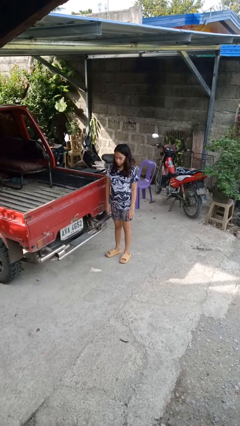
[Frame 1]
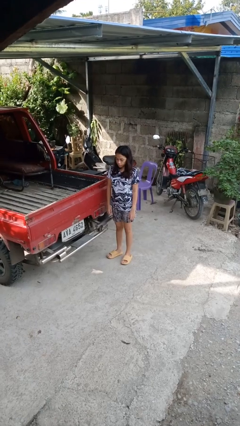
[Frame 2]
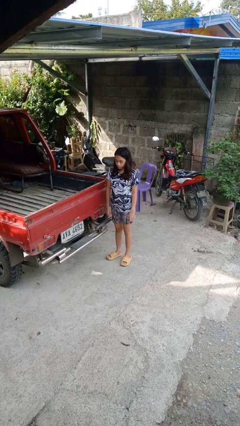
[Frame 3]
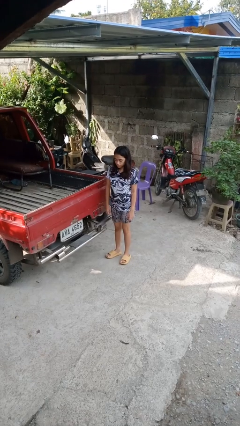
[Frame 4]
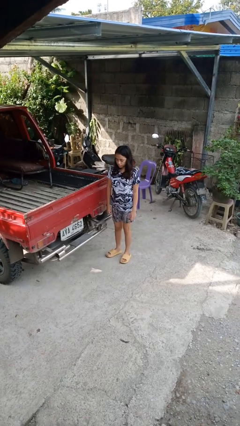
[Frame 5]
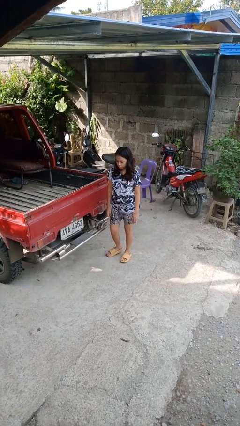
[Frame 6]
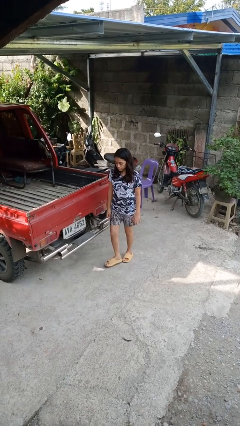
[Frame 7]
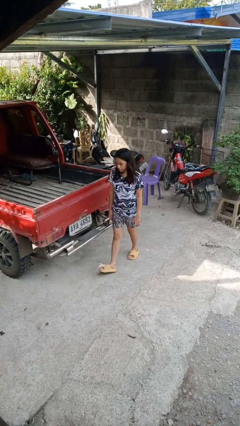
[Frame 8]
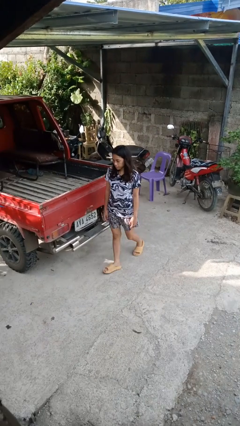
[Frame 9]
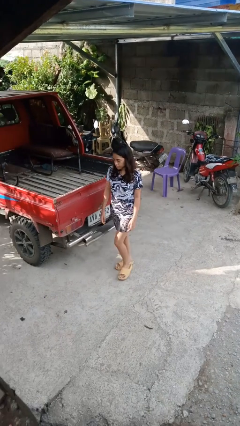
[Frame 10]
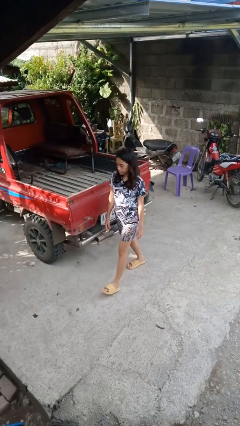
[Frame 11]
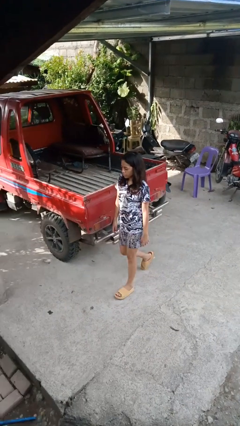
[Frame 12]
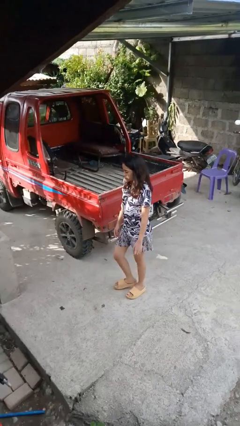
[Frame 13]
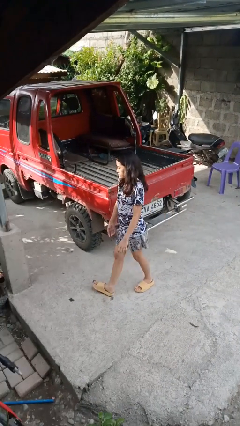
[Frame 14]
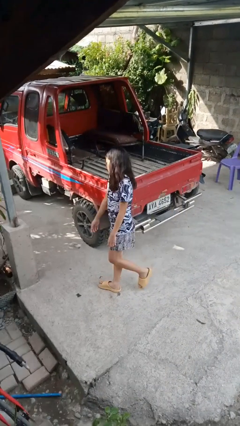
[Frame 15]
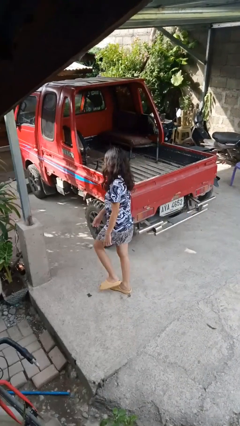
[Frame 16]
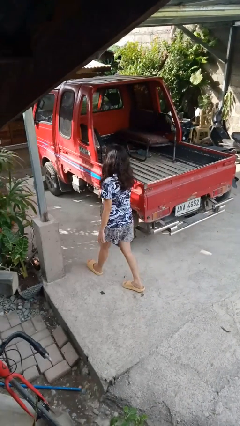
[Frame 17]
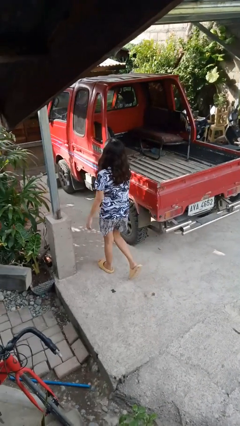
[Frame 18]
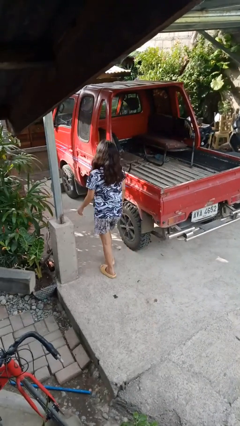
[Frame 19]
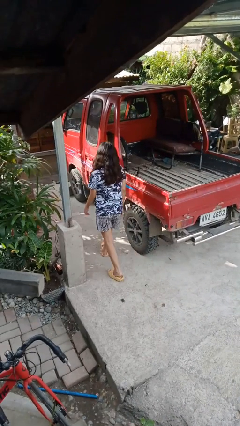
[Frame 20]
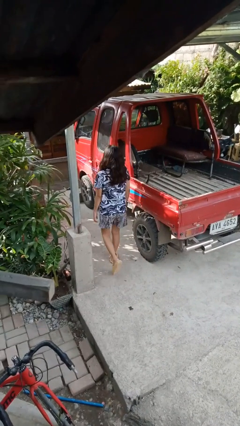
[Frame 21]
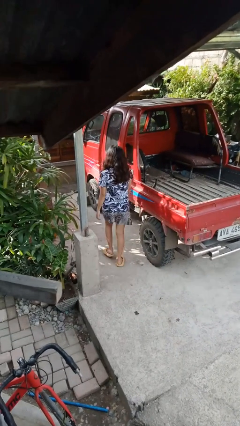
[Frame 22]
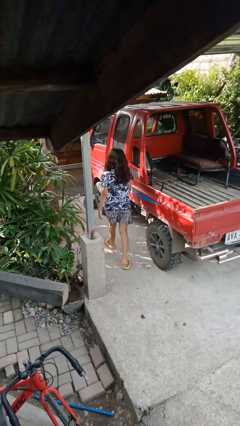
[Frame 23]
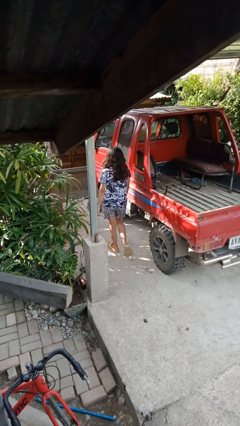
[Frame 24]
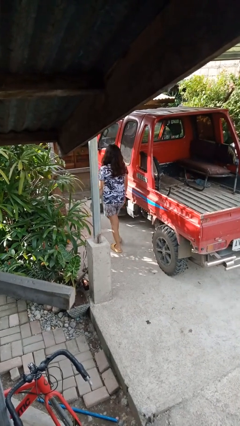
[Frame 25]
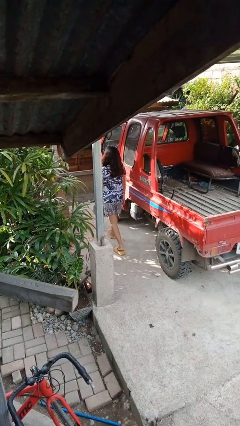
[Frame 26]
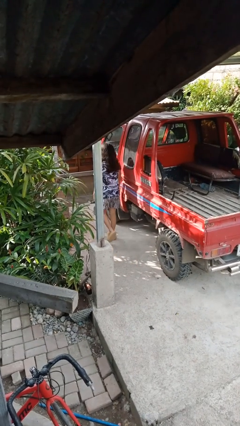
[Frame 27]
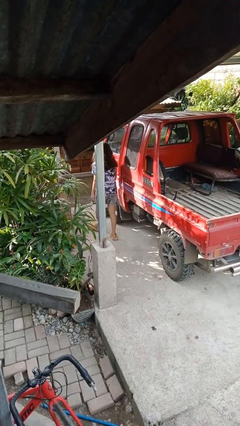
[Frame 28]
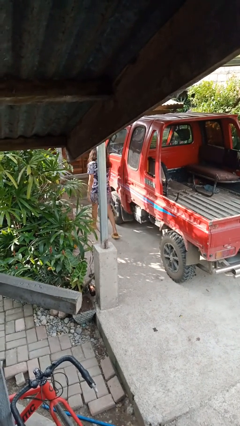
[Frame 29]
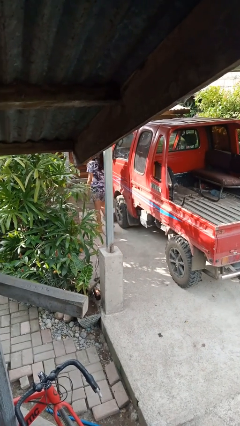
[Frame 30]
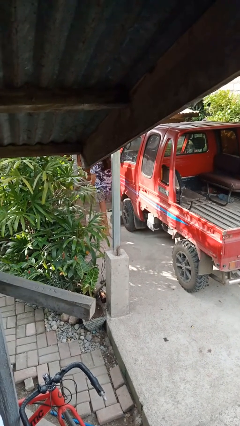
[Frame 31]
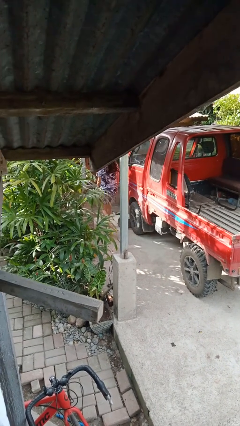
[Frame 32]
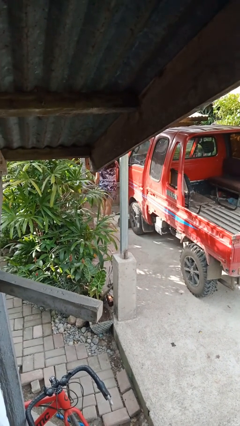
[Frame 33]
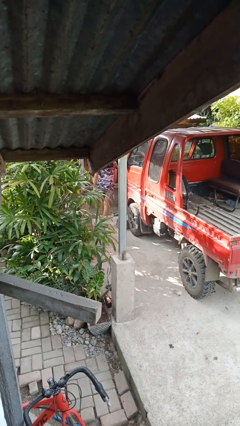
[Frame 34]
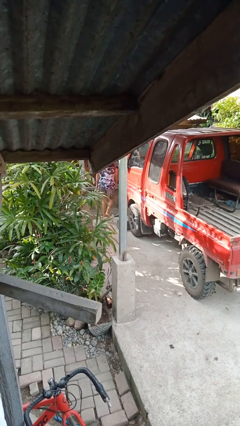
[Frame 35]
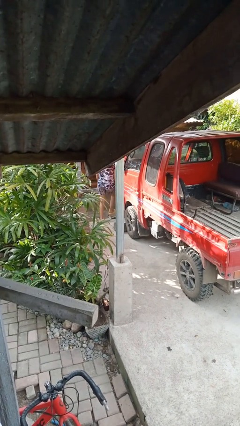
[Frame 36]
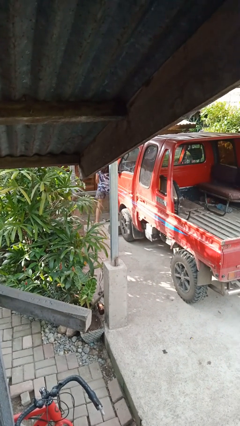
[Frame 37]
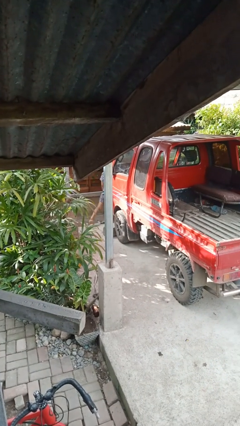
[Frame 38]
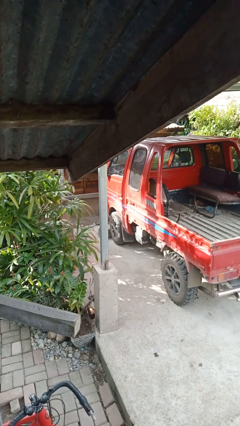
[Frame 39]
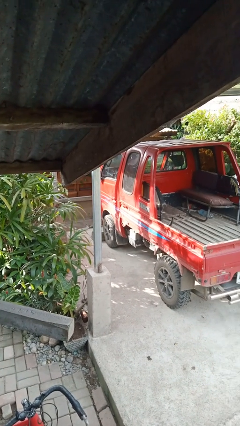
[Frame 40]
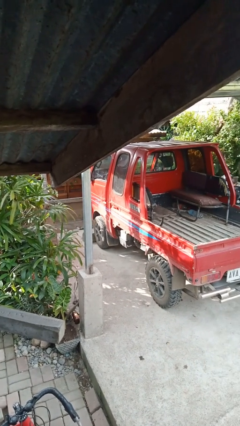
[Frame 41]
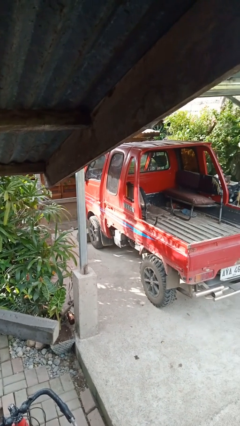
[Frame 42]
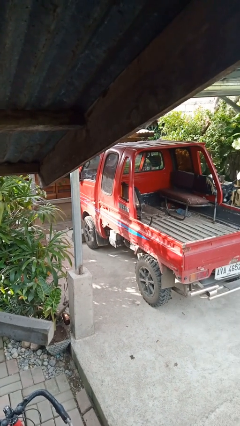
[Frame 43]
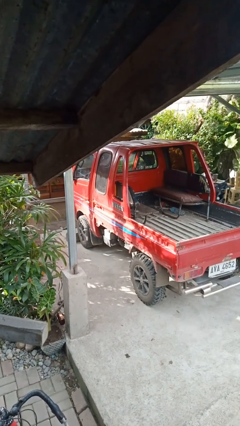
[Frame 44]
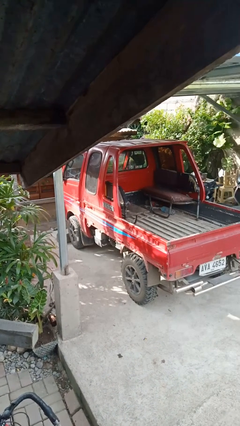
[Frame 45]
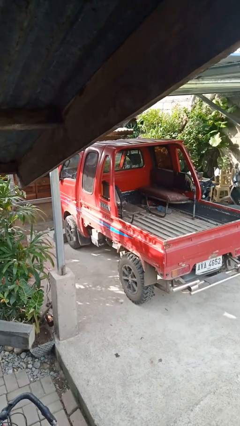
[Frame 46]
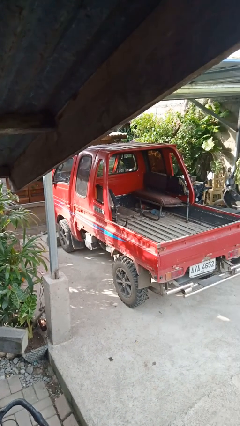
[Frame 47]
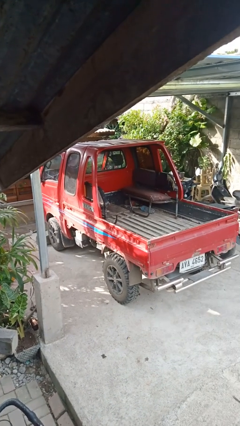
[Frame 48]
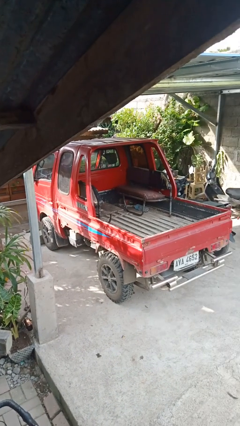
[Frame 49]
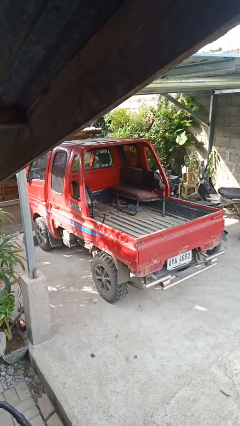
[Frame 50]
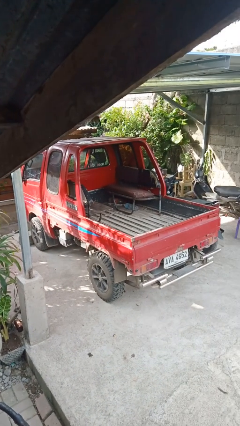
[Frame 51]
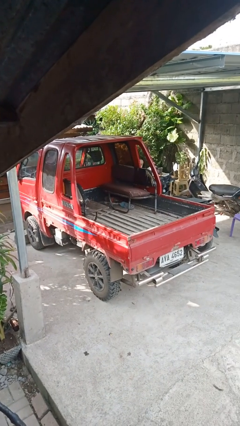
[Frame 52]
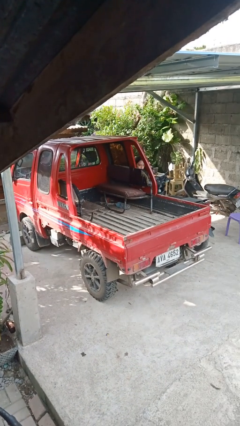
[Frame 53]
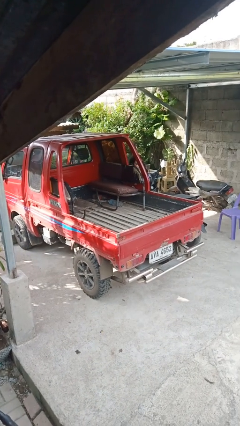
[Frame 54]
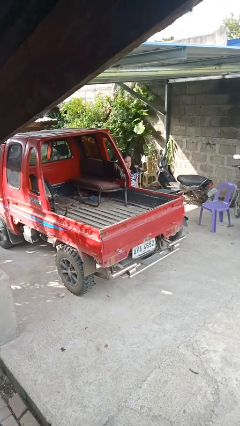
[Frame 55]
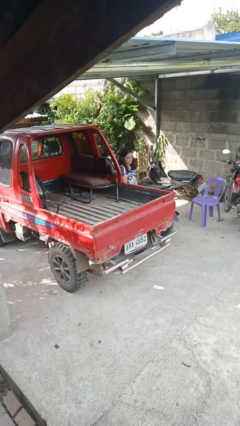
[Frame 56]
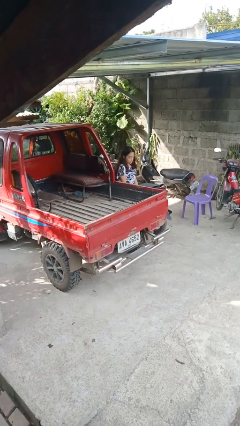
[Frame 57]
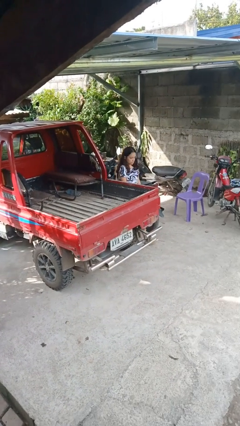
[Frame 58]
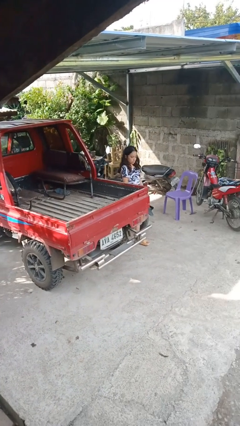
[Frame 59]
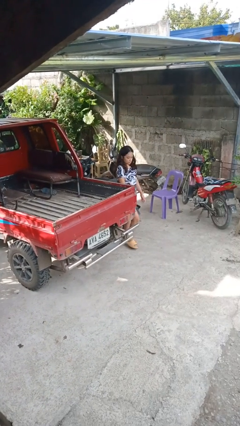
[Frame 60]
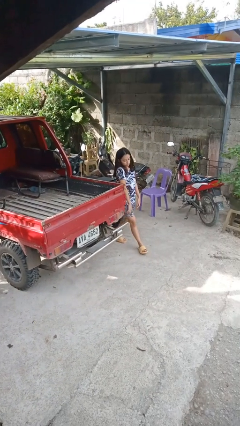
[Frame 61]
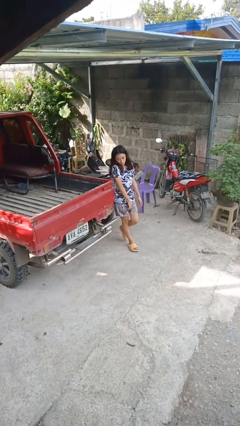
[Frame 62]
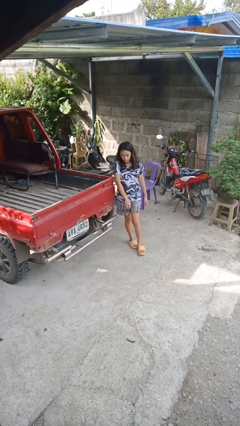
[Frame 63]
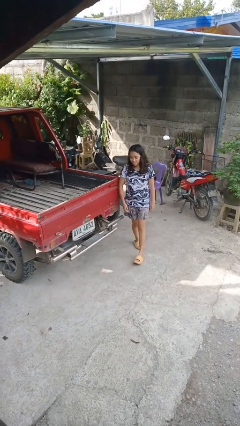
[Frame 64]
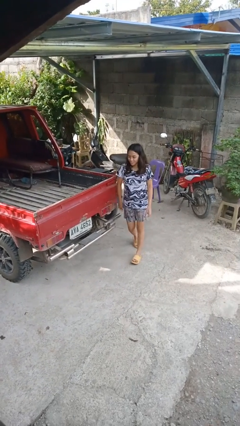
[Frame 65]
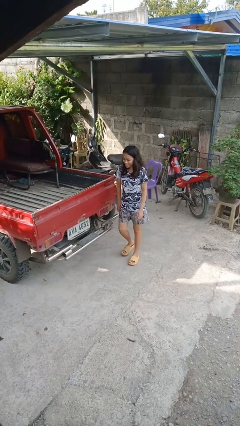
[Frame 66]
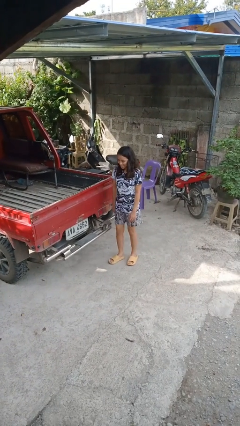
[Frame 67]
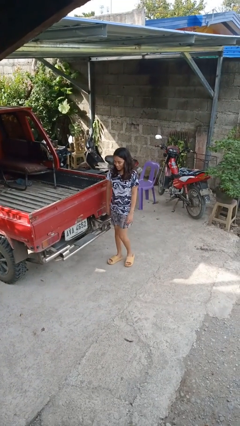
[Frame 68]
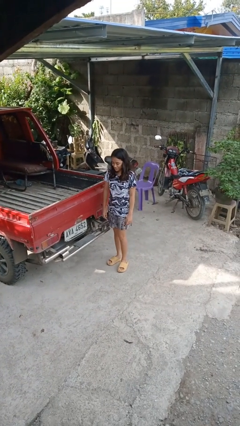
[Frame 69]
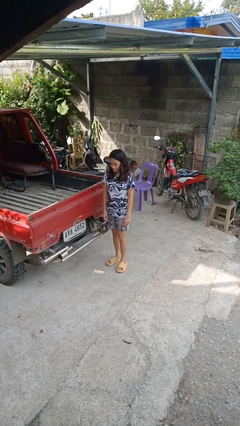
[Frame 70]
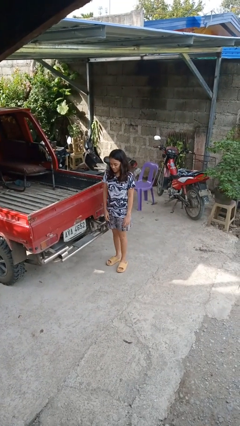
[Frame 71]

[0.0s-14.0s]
person walks around car

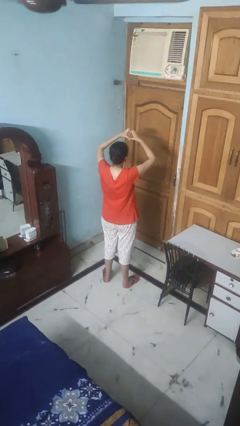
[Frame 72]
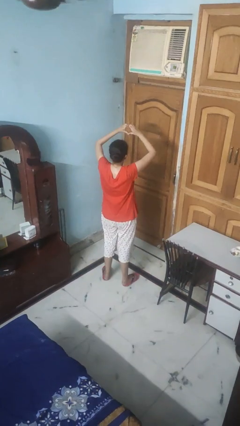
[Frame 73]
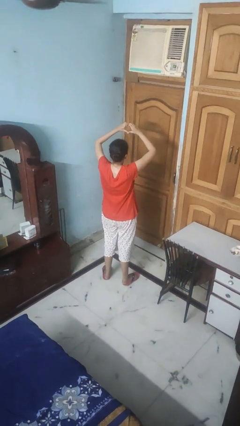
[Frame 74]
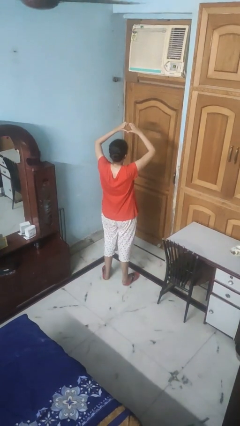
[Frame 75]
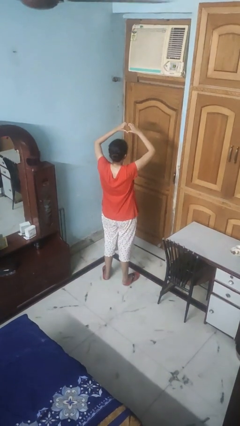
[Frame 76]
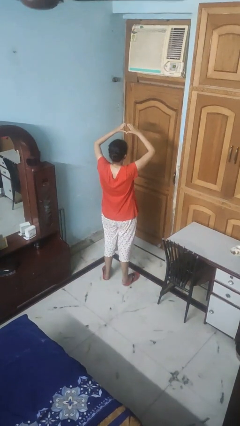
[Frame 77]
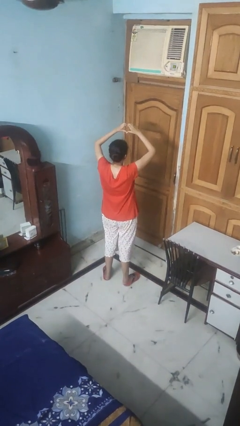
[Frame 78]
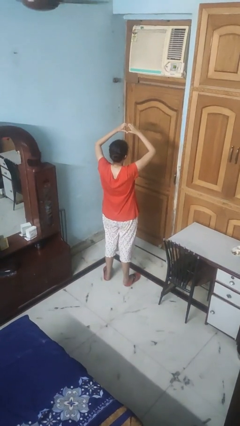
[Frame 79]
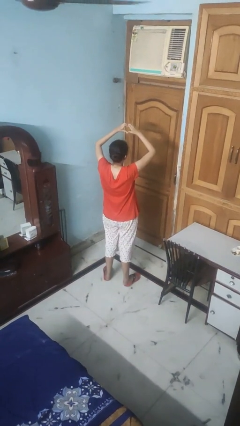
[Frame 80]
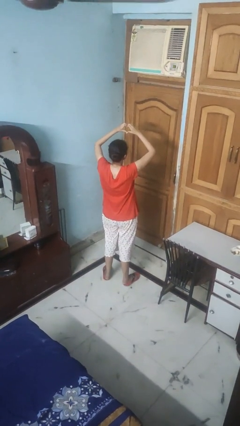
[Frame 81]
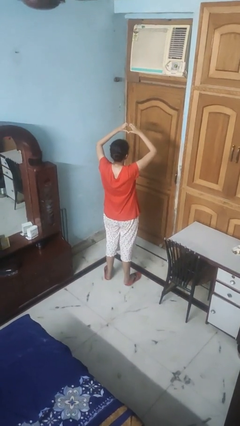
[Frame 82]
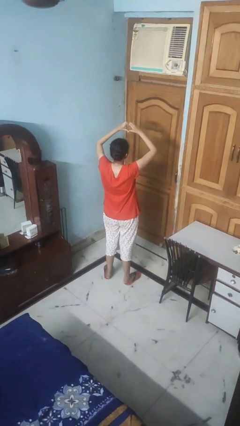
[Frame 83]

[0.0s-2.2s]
person gestures heart

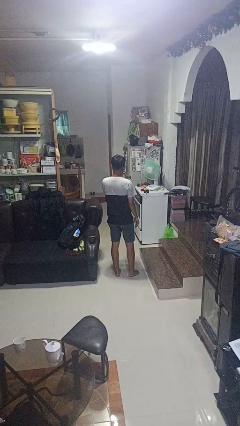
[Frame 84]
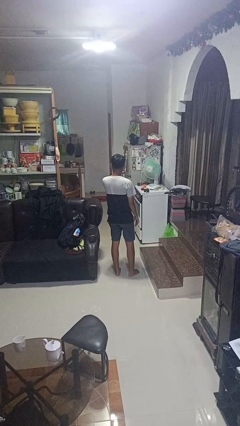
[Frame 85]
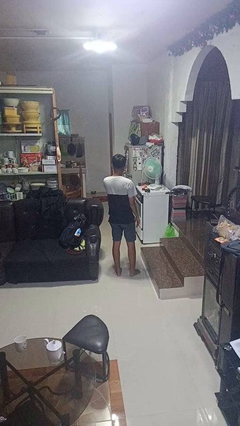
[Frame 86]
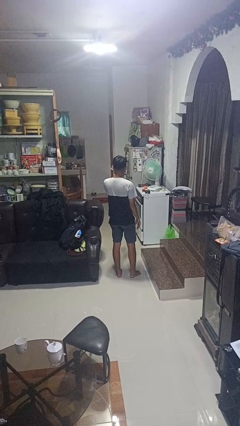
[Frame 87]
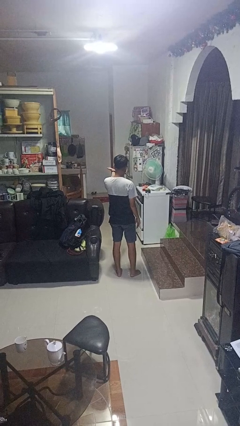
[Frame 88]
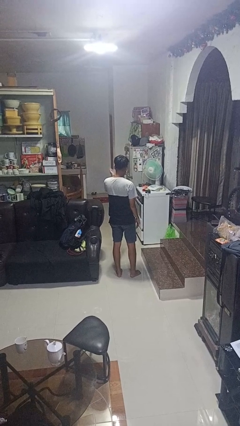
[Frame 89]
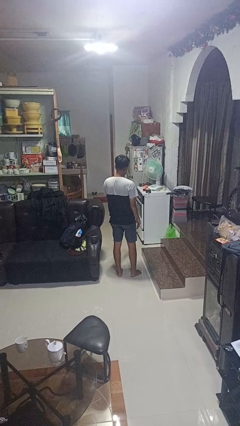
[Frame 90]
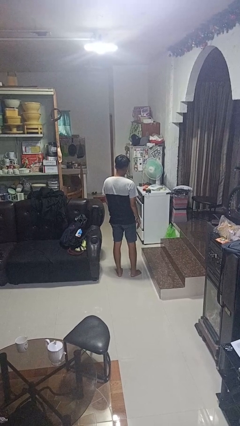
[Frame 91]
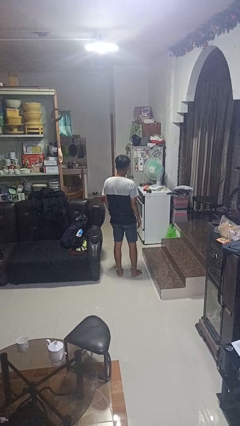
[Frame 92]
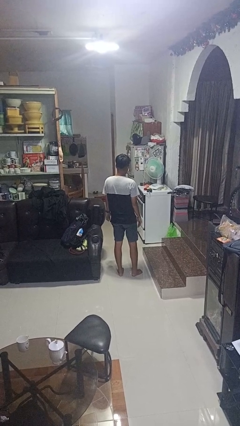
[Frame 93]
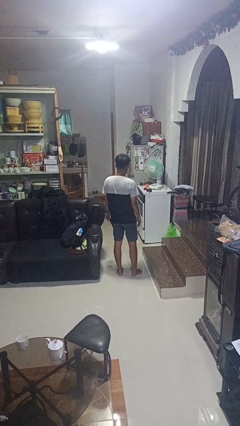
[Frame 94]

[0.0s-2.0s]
person gestures blow kiss
